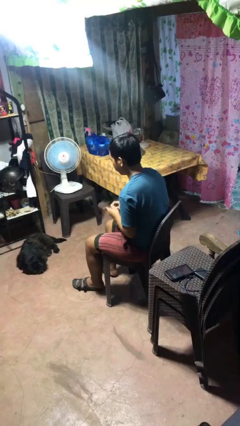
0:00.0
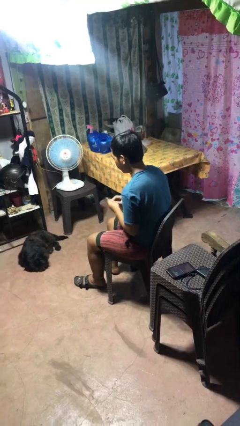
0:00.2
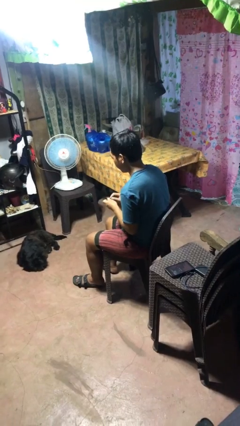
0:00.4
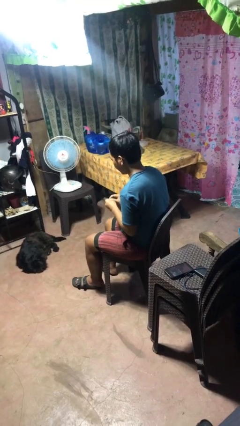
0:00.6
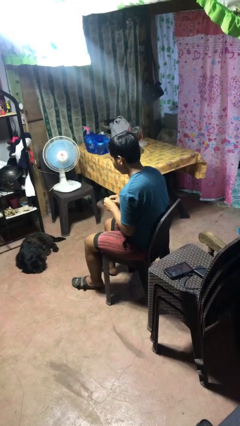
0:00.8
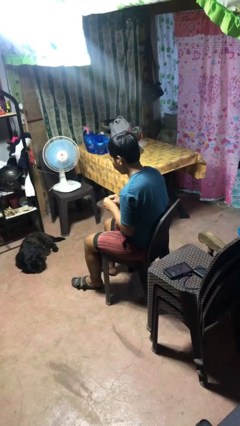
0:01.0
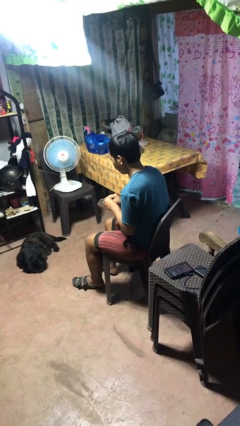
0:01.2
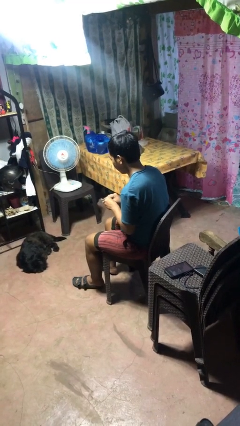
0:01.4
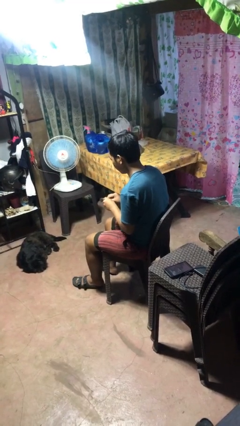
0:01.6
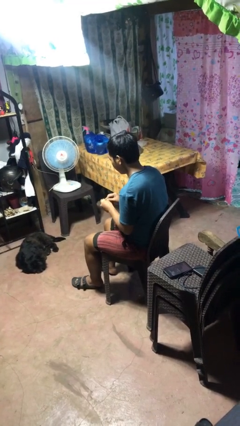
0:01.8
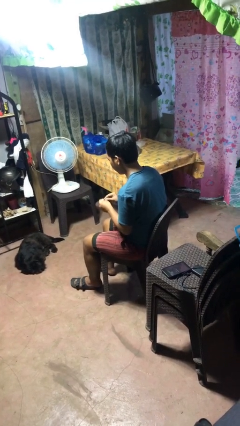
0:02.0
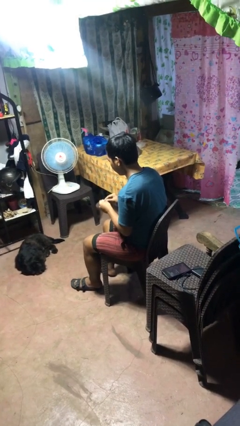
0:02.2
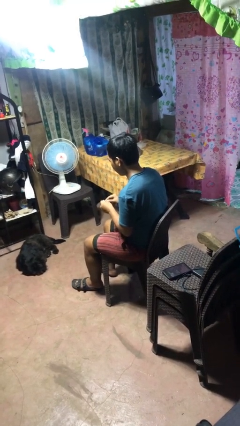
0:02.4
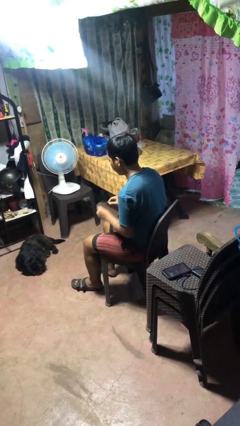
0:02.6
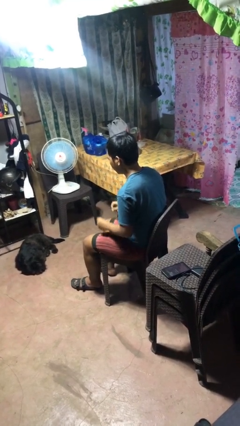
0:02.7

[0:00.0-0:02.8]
person files fingernails

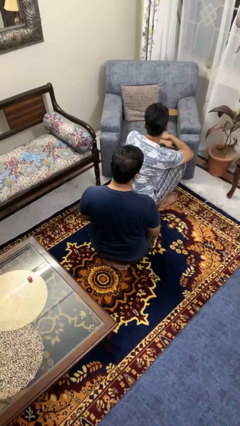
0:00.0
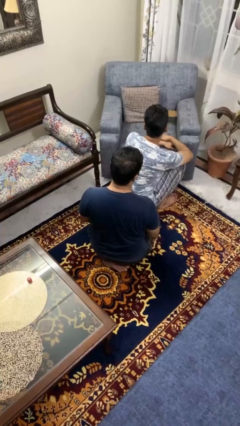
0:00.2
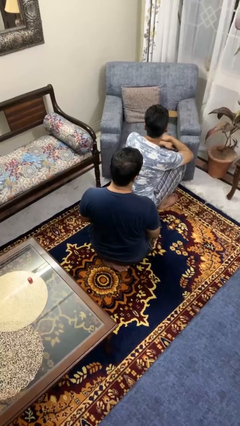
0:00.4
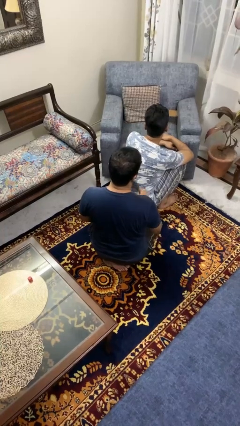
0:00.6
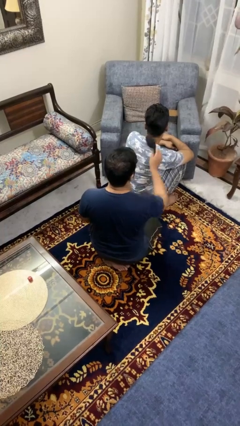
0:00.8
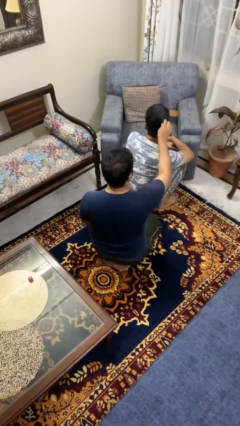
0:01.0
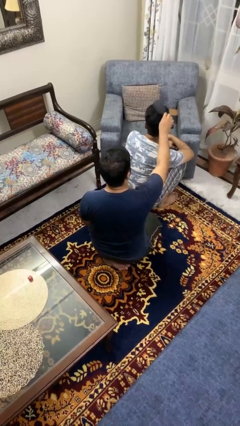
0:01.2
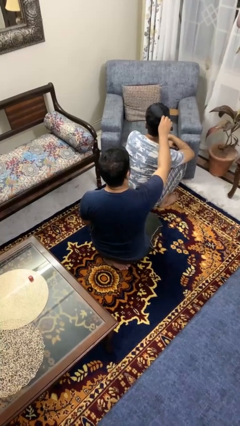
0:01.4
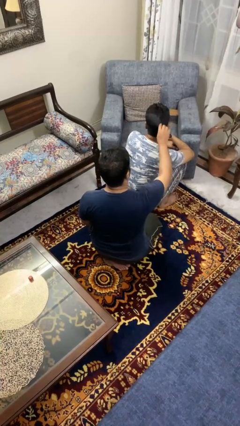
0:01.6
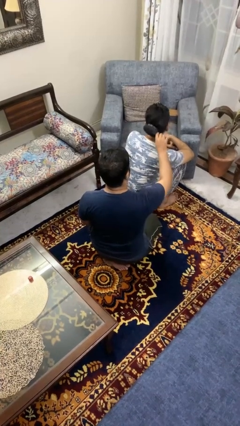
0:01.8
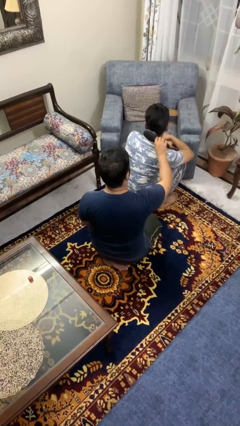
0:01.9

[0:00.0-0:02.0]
person brushes hair of person

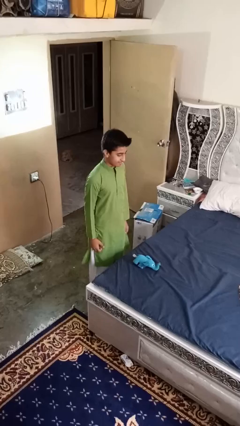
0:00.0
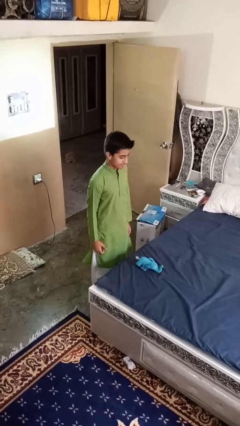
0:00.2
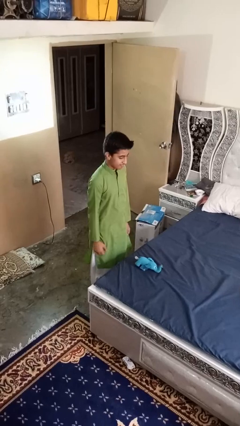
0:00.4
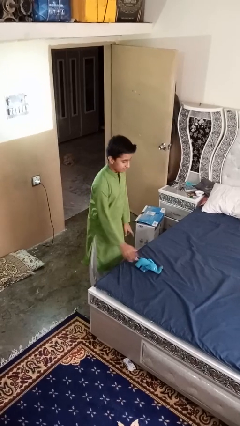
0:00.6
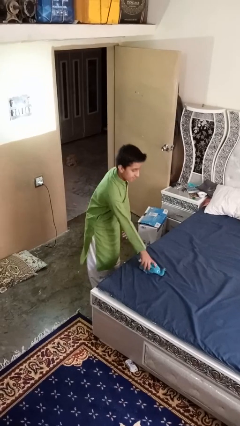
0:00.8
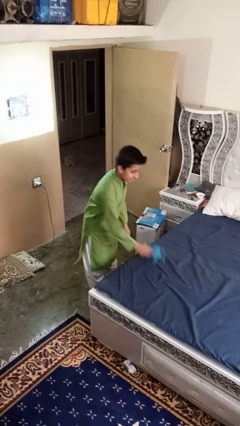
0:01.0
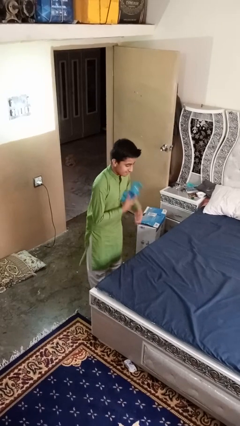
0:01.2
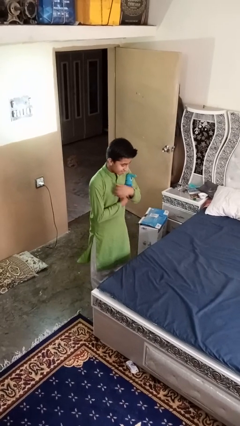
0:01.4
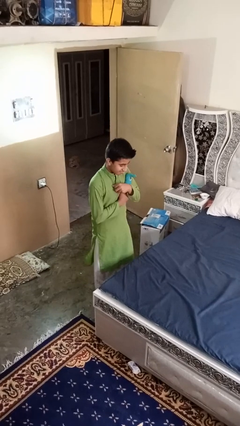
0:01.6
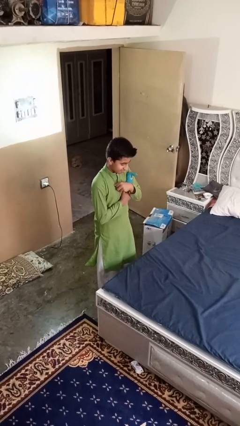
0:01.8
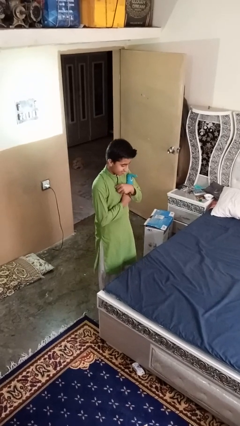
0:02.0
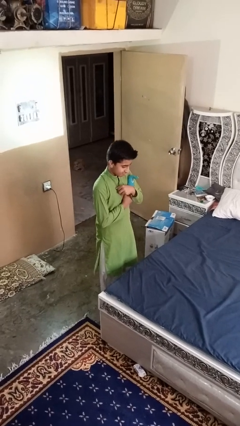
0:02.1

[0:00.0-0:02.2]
person hugs stuffed animal

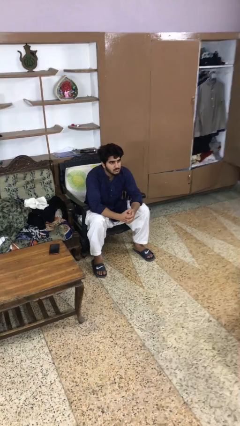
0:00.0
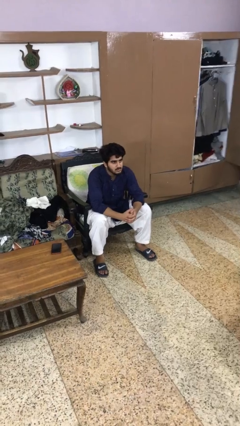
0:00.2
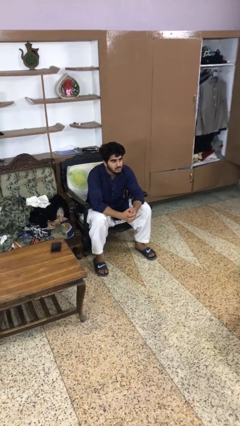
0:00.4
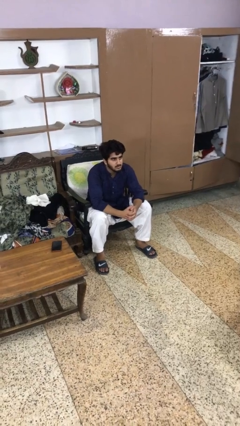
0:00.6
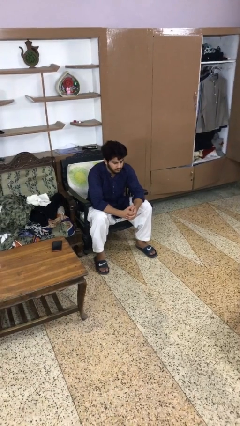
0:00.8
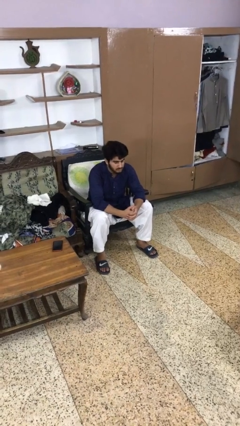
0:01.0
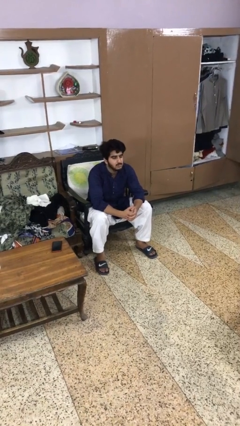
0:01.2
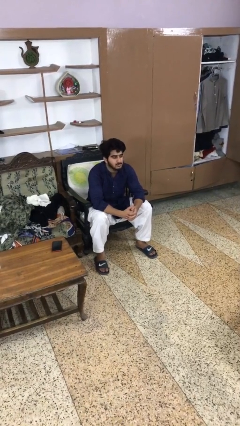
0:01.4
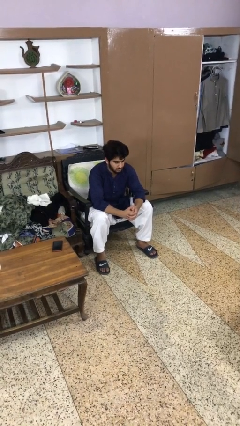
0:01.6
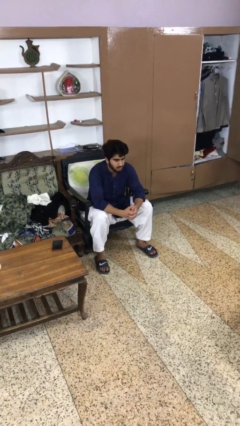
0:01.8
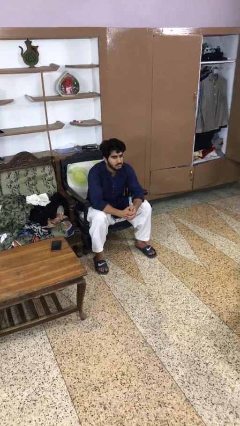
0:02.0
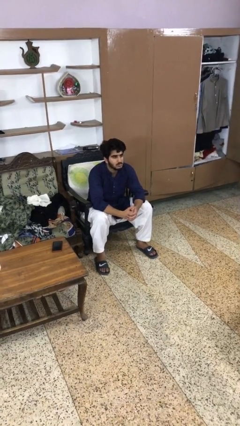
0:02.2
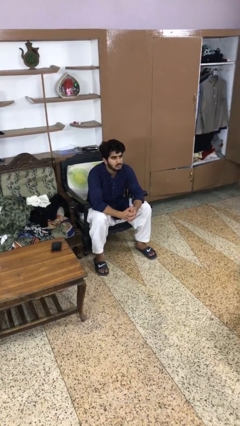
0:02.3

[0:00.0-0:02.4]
person nods head

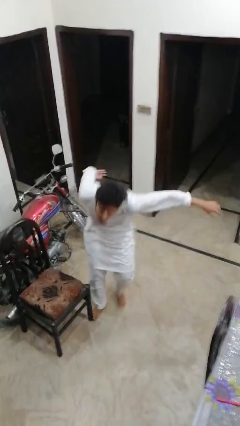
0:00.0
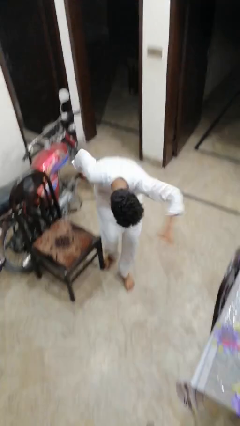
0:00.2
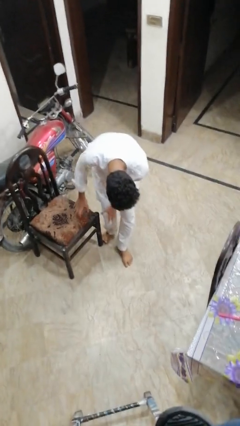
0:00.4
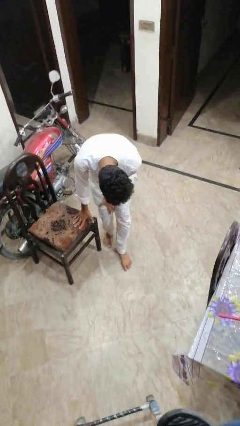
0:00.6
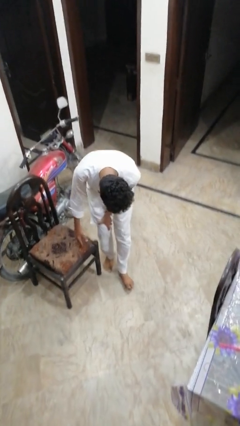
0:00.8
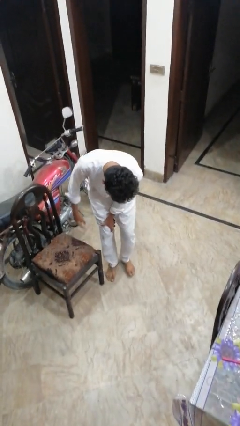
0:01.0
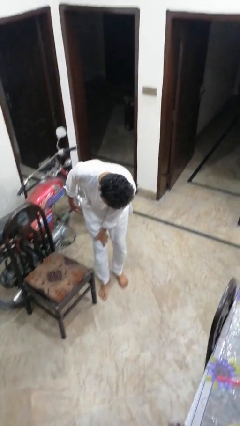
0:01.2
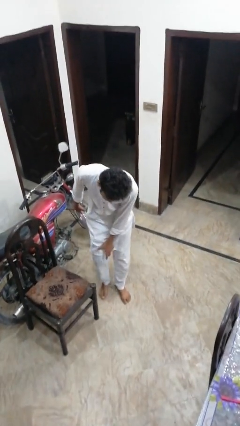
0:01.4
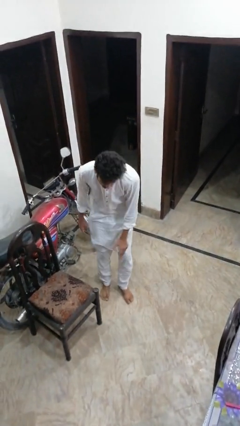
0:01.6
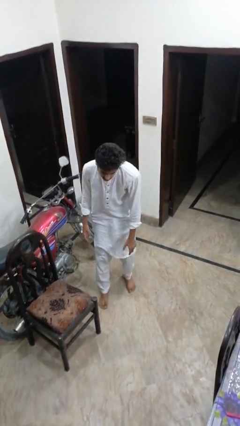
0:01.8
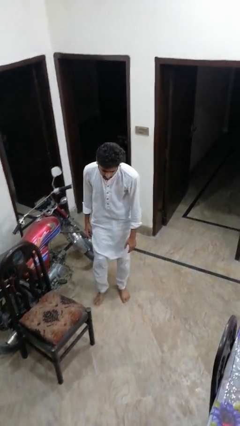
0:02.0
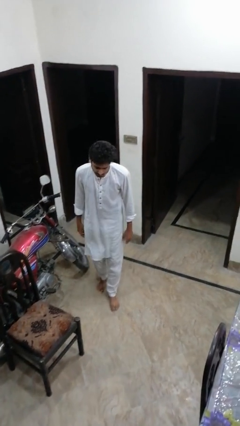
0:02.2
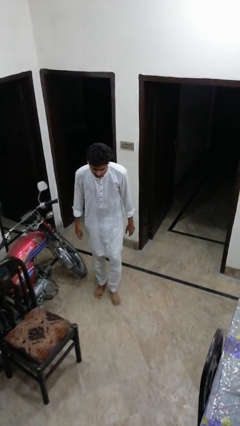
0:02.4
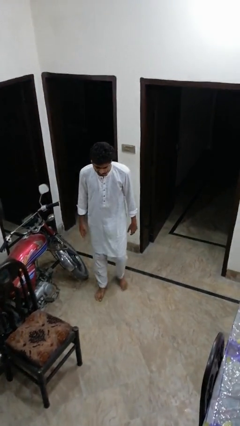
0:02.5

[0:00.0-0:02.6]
person stubs toe

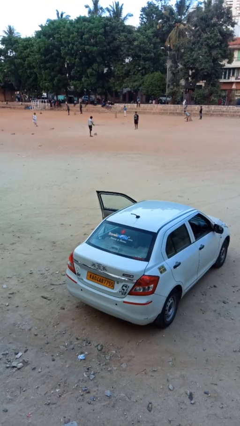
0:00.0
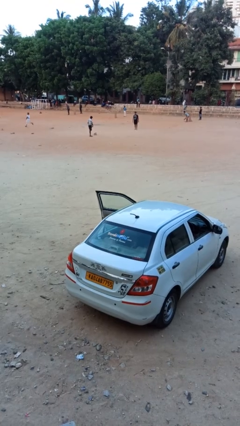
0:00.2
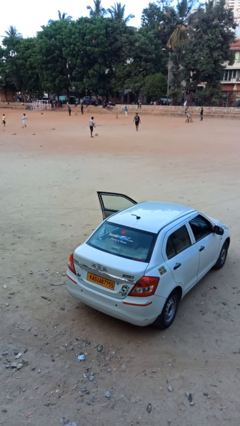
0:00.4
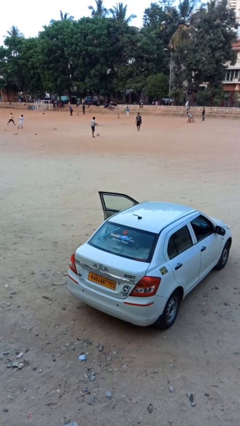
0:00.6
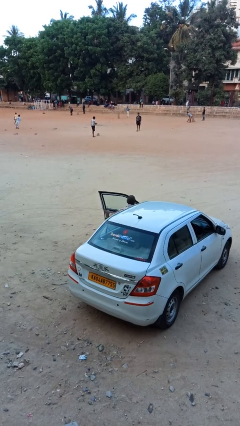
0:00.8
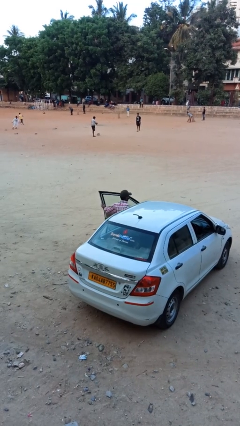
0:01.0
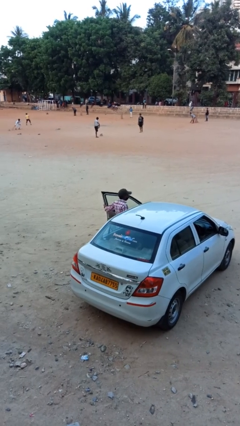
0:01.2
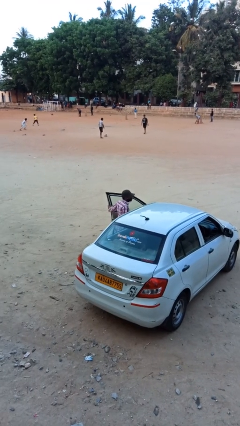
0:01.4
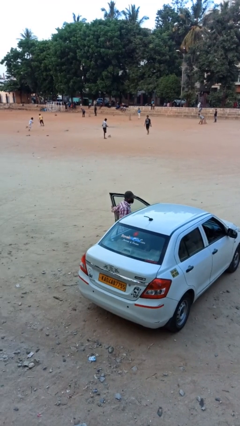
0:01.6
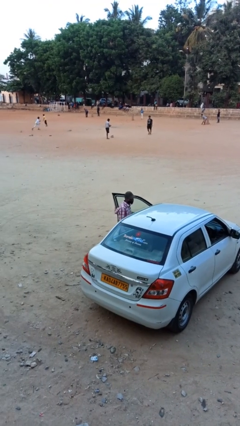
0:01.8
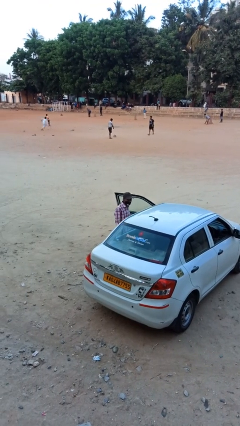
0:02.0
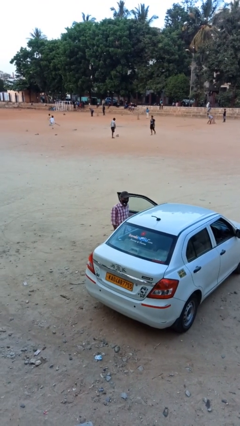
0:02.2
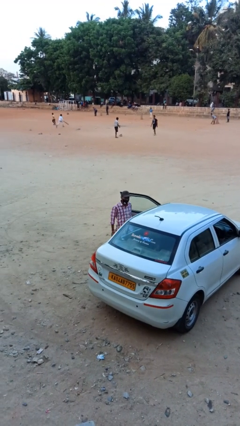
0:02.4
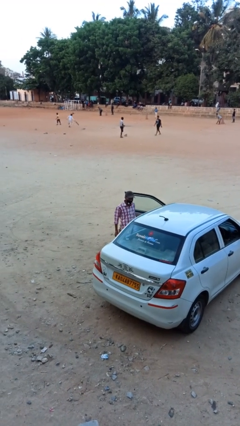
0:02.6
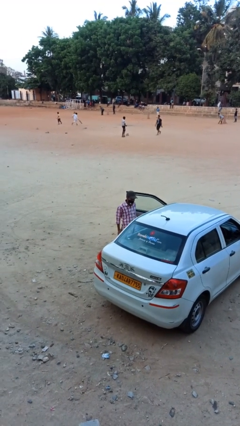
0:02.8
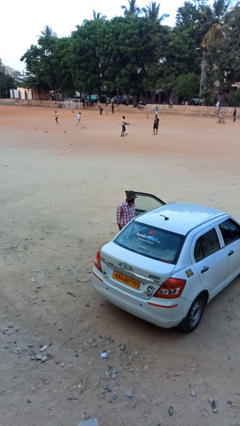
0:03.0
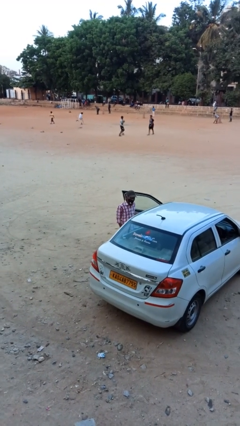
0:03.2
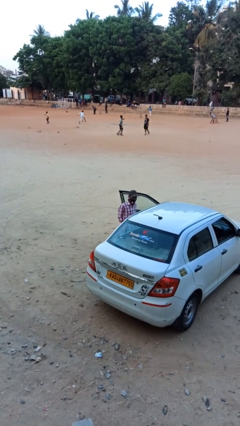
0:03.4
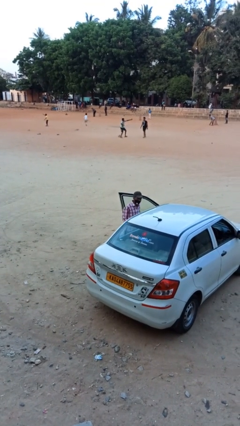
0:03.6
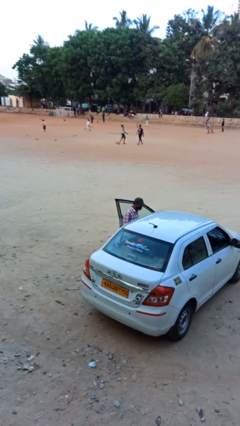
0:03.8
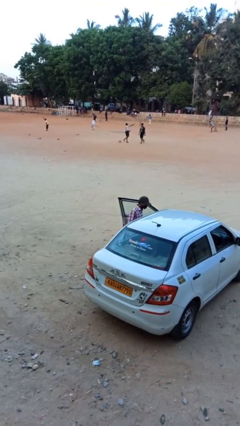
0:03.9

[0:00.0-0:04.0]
person exits car

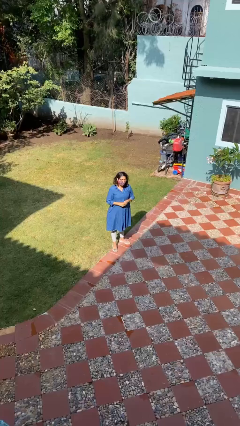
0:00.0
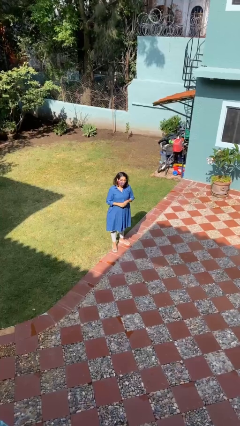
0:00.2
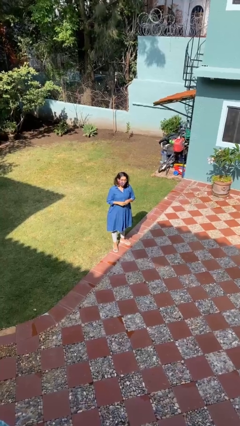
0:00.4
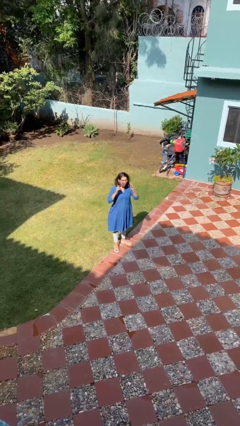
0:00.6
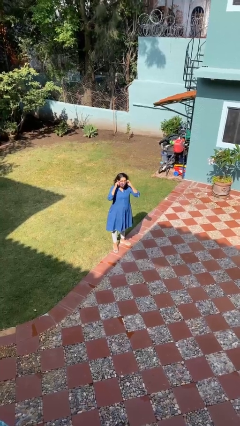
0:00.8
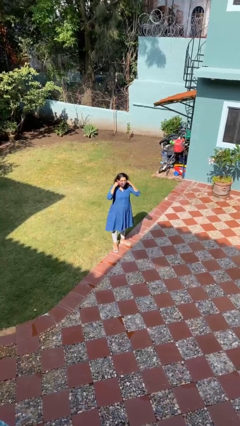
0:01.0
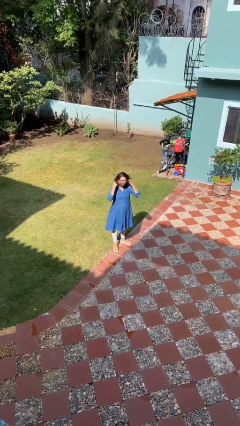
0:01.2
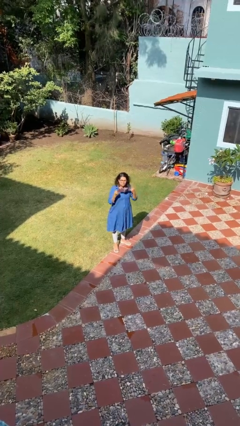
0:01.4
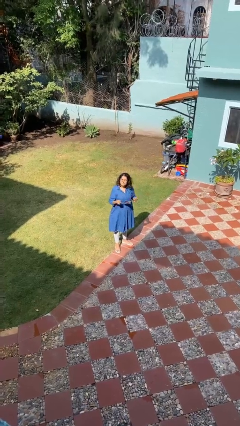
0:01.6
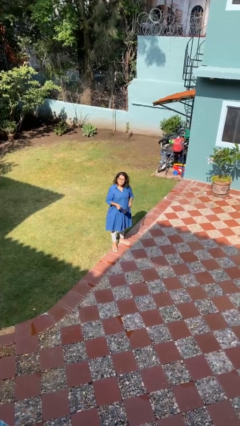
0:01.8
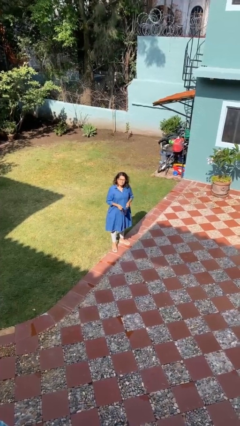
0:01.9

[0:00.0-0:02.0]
person takes off facemask
